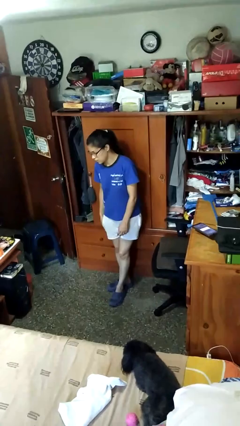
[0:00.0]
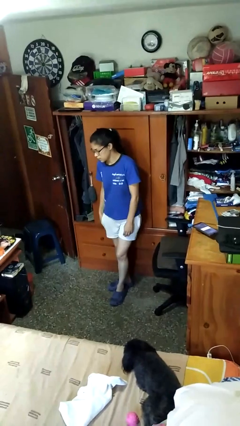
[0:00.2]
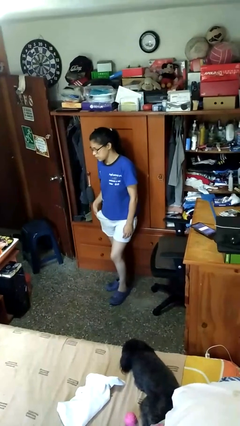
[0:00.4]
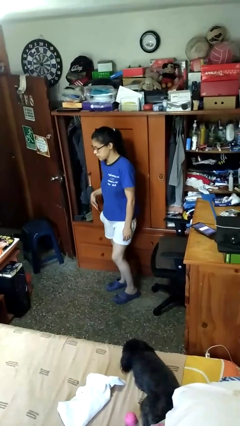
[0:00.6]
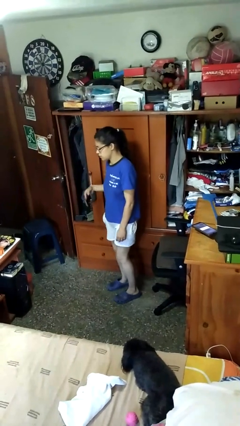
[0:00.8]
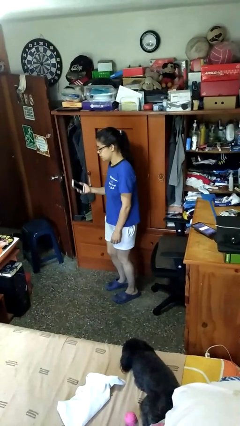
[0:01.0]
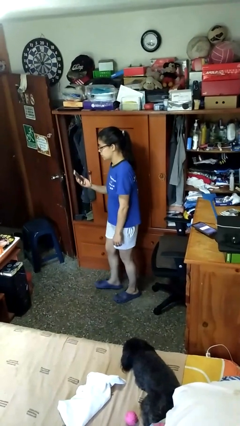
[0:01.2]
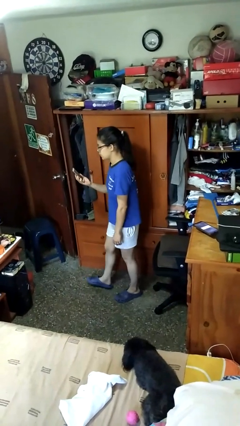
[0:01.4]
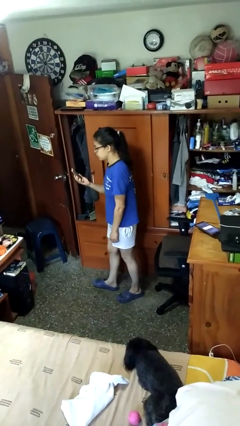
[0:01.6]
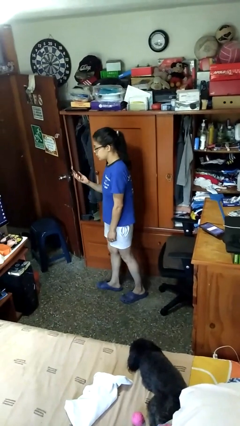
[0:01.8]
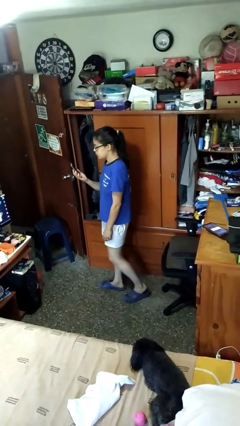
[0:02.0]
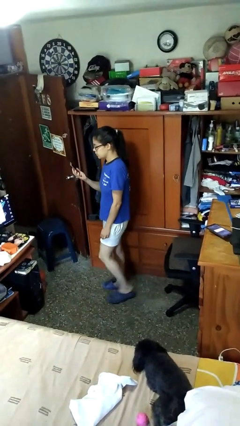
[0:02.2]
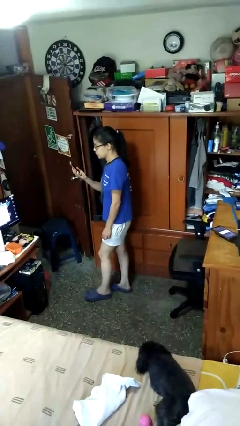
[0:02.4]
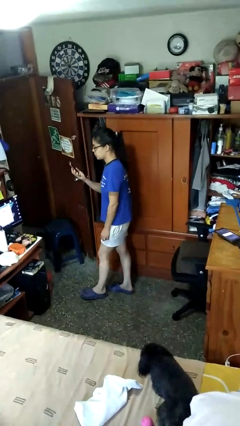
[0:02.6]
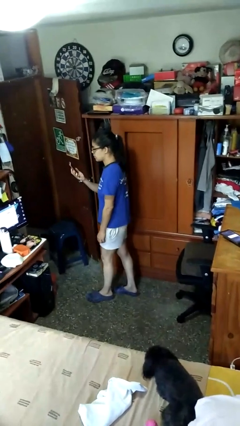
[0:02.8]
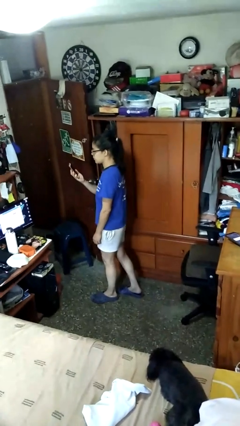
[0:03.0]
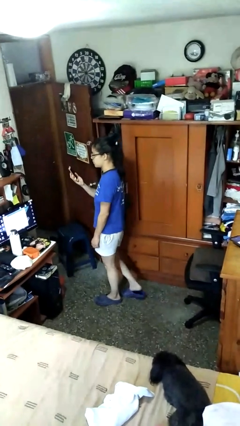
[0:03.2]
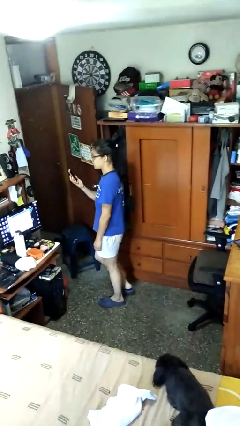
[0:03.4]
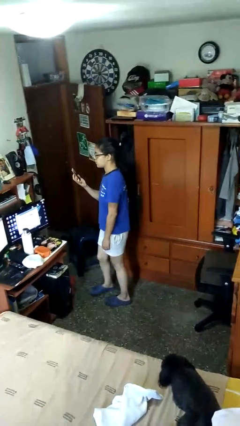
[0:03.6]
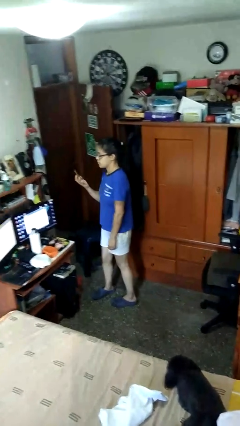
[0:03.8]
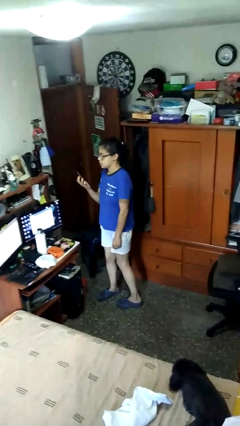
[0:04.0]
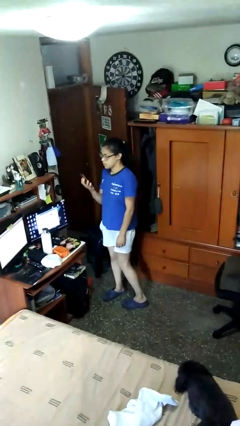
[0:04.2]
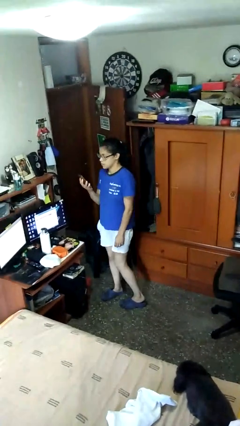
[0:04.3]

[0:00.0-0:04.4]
person takes phone from pocket

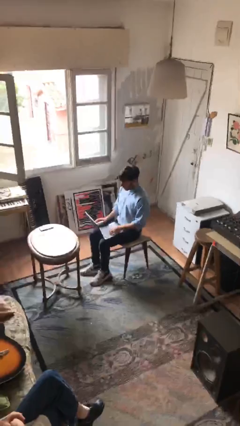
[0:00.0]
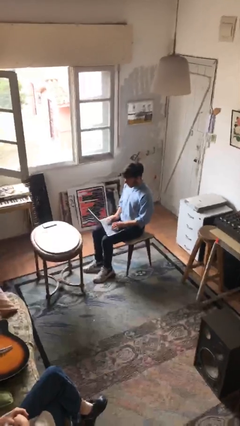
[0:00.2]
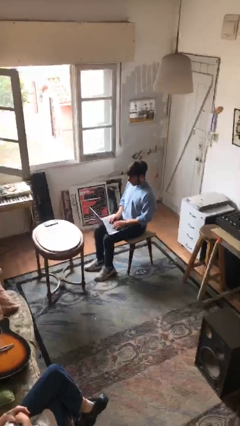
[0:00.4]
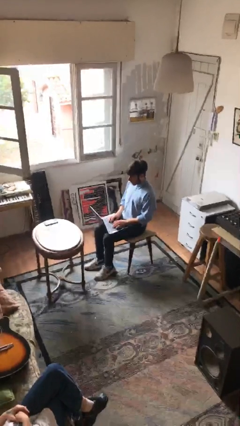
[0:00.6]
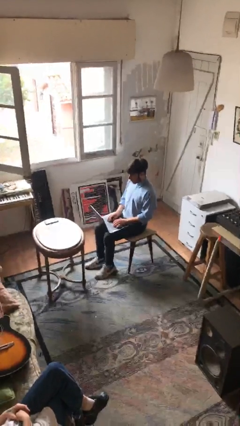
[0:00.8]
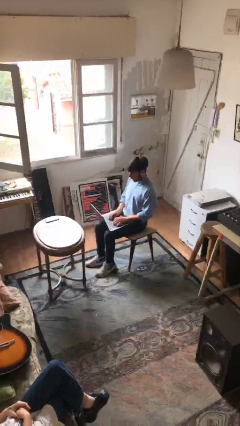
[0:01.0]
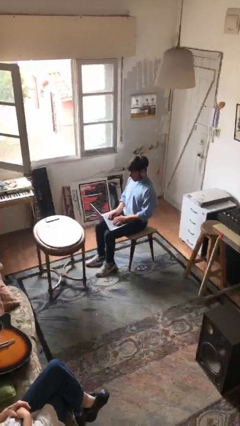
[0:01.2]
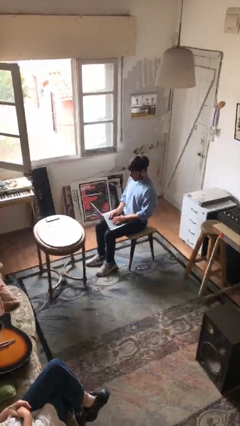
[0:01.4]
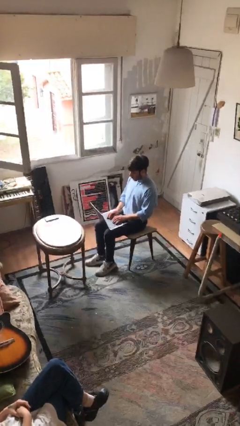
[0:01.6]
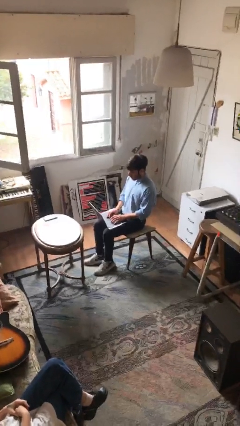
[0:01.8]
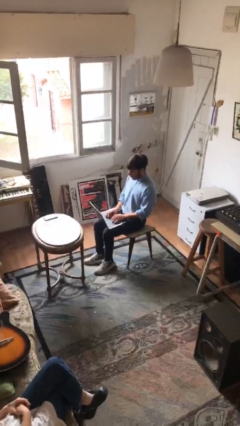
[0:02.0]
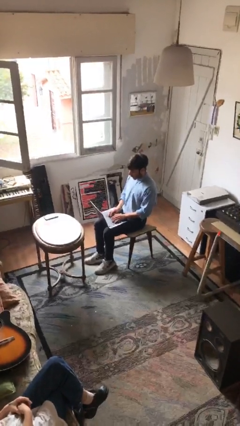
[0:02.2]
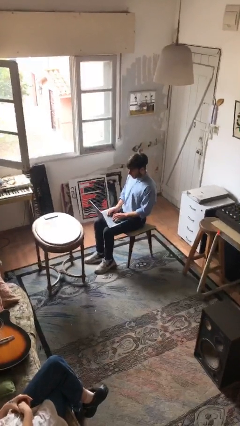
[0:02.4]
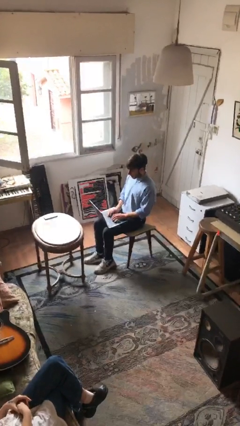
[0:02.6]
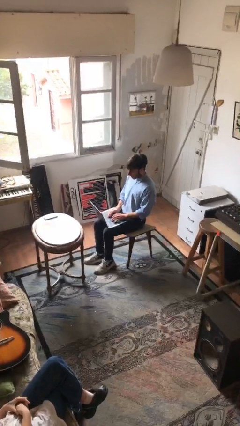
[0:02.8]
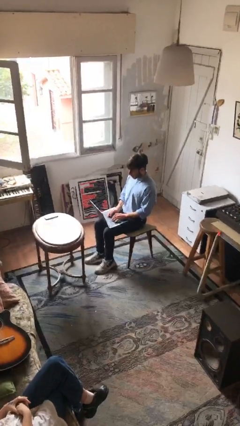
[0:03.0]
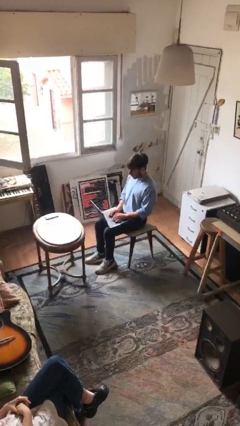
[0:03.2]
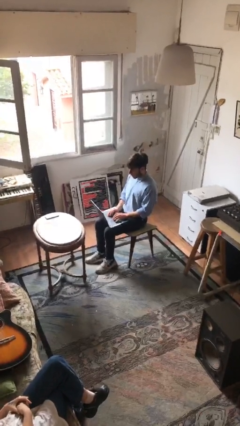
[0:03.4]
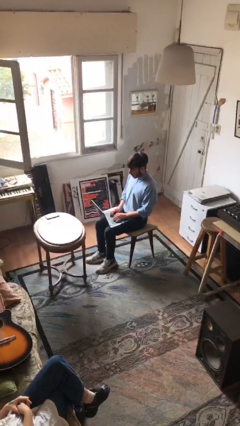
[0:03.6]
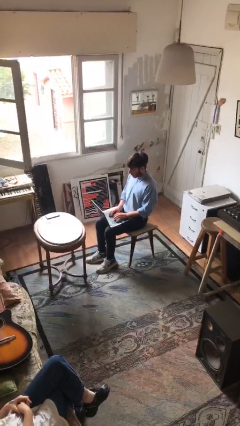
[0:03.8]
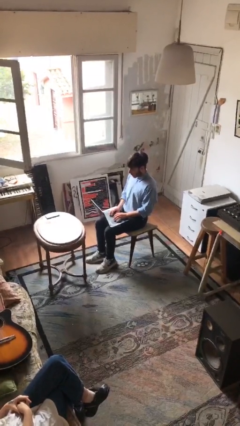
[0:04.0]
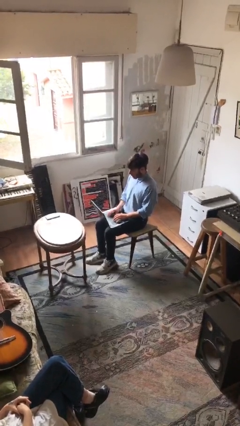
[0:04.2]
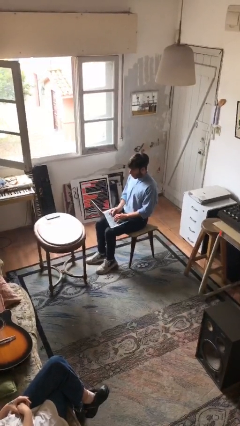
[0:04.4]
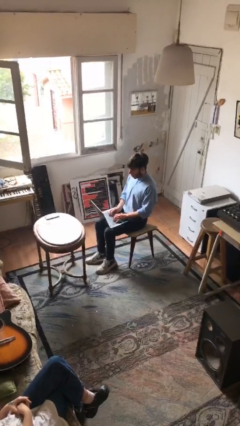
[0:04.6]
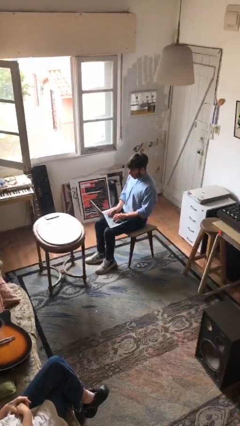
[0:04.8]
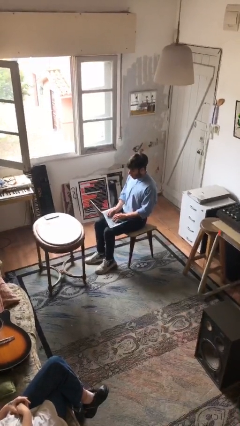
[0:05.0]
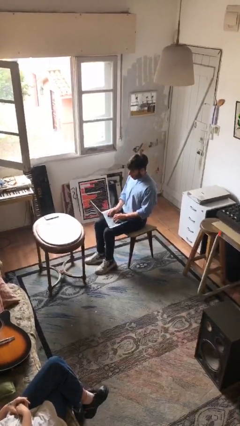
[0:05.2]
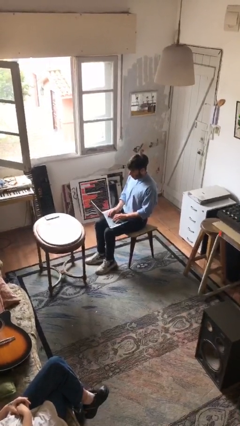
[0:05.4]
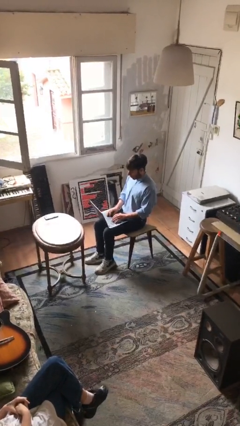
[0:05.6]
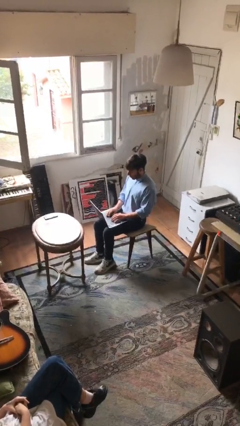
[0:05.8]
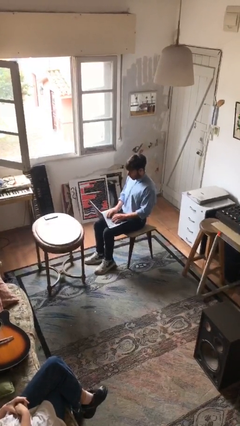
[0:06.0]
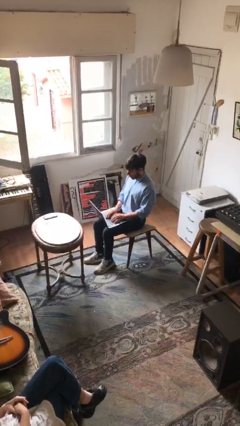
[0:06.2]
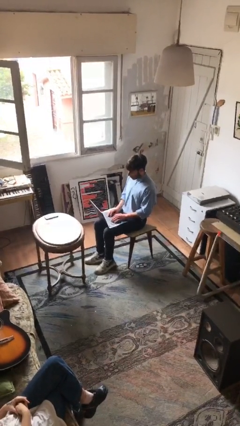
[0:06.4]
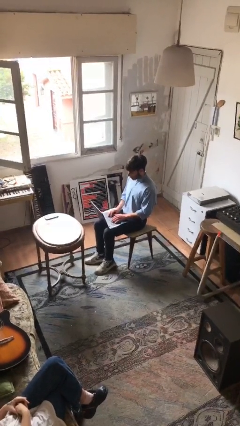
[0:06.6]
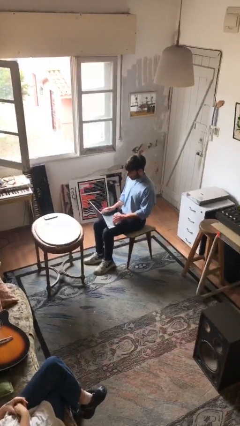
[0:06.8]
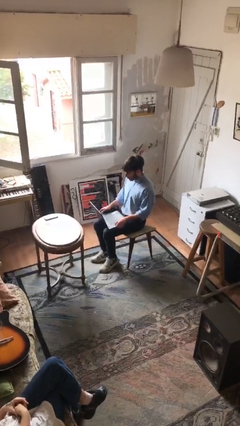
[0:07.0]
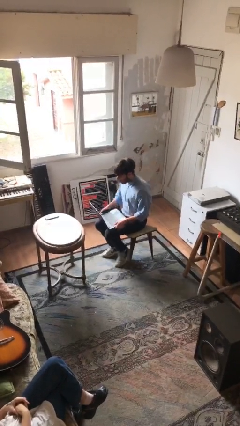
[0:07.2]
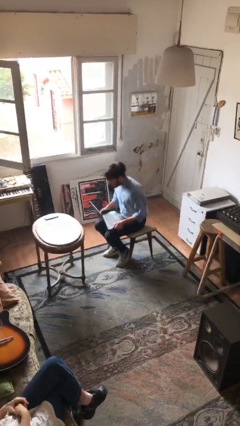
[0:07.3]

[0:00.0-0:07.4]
person interacts with laptop

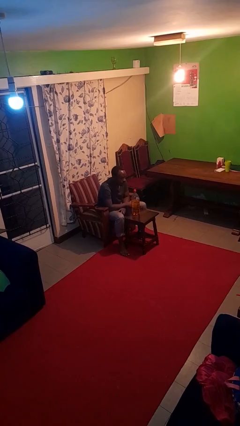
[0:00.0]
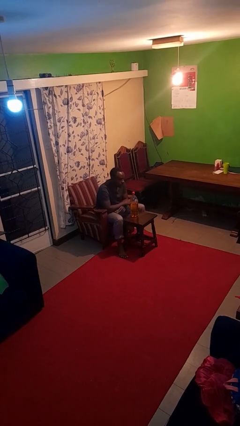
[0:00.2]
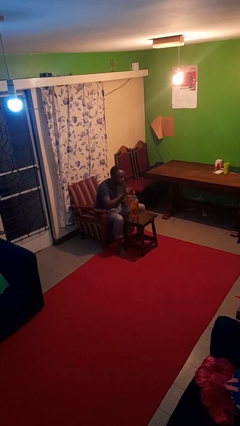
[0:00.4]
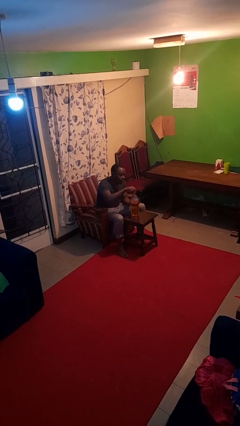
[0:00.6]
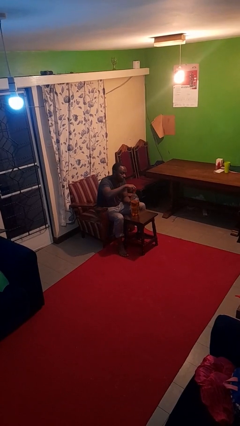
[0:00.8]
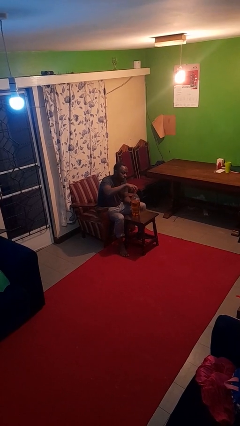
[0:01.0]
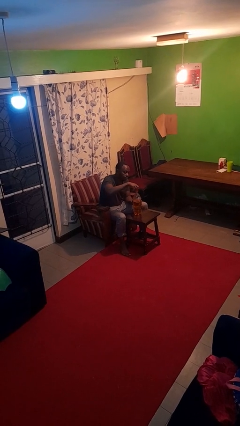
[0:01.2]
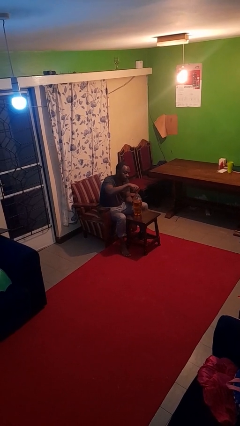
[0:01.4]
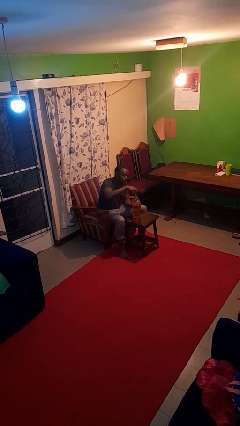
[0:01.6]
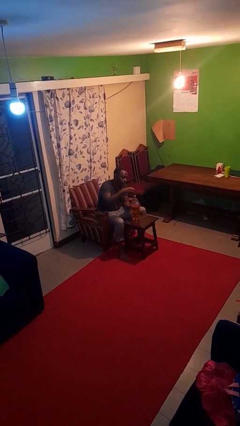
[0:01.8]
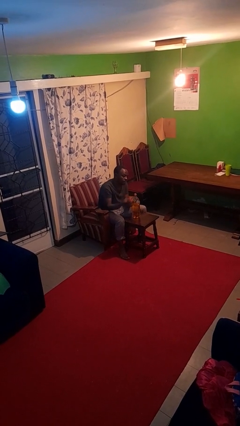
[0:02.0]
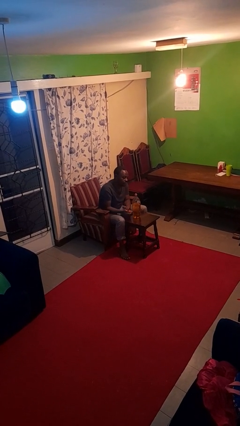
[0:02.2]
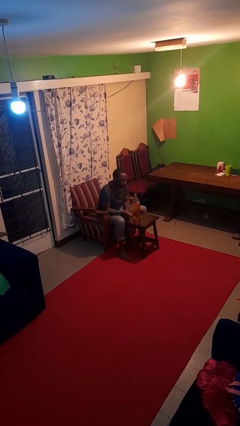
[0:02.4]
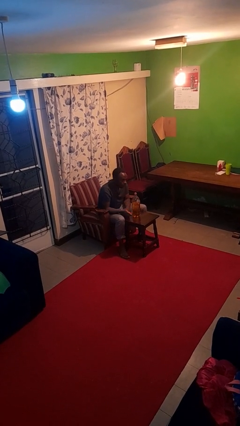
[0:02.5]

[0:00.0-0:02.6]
person unscrews lid from bottle

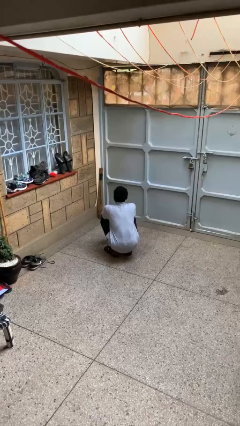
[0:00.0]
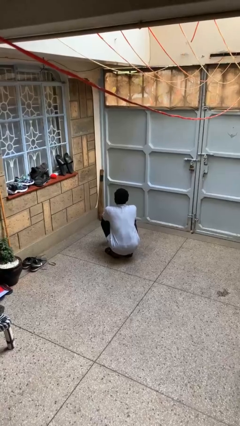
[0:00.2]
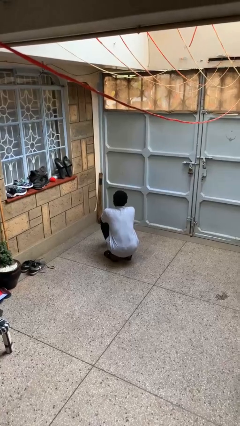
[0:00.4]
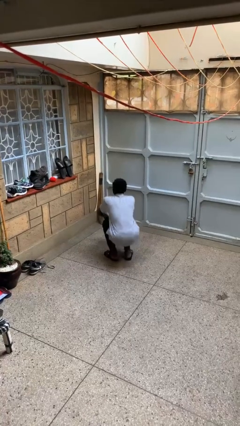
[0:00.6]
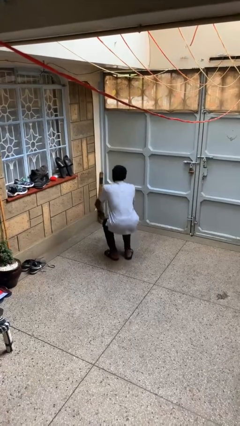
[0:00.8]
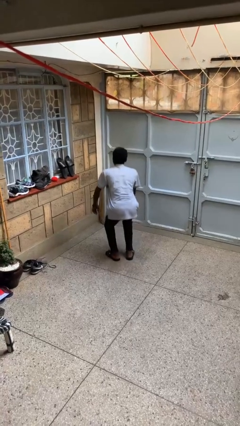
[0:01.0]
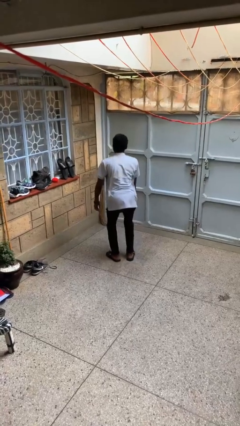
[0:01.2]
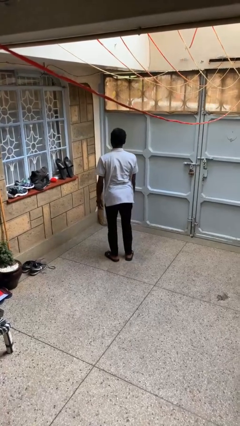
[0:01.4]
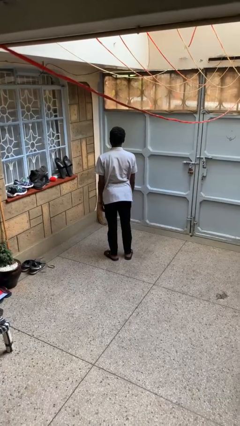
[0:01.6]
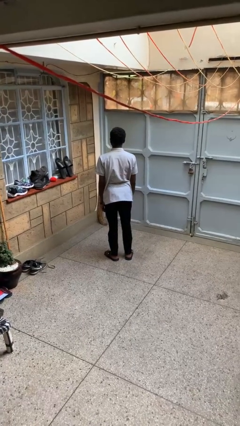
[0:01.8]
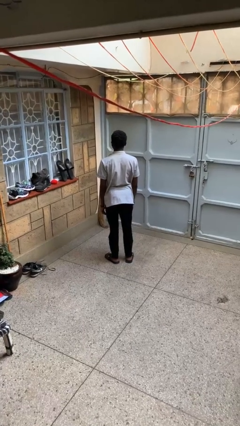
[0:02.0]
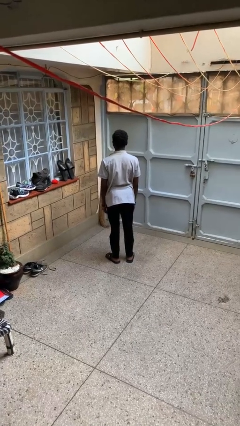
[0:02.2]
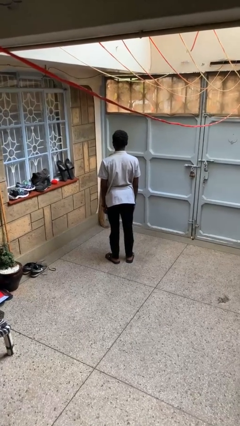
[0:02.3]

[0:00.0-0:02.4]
person stands up

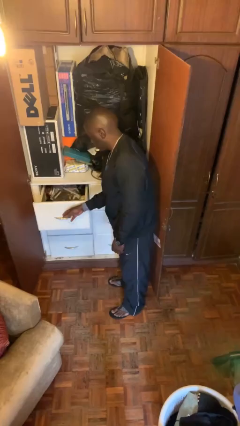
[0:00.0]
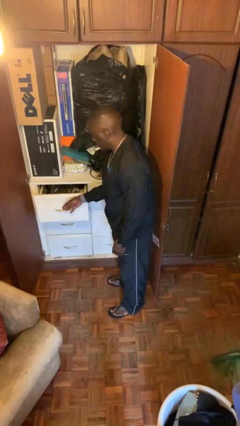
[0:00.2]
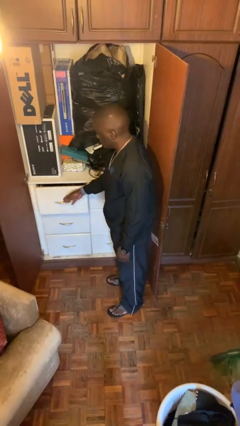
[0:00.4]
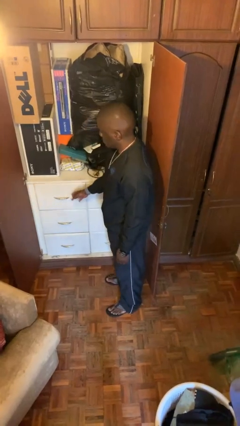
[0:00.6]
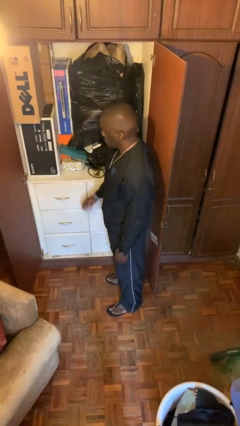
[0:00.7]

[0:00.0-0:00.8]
person closes dresser drawer
